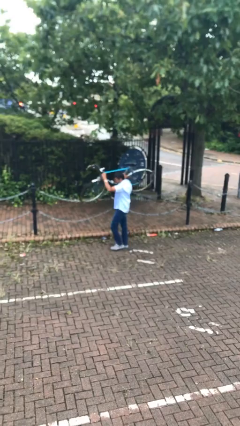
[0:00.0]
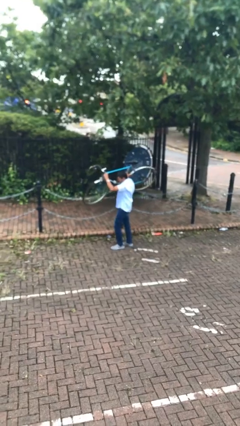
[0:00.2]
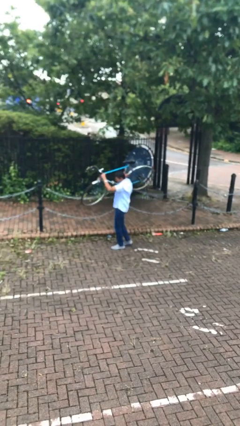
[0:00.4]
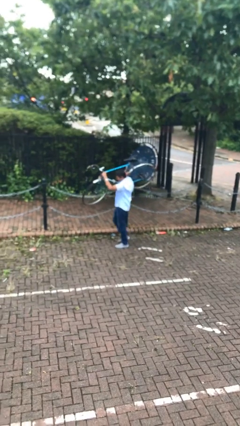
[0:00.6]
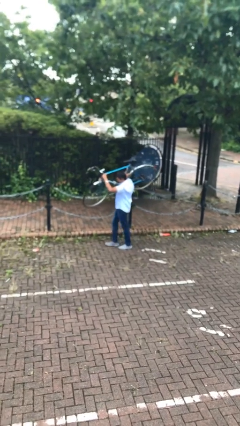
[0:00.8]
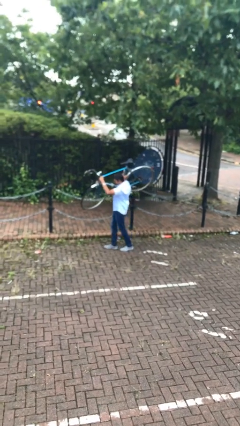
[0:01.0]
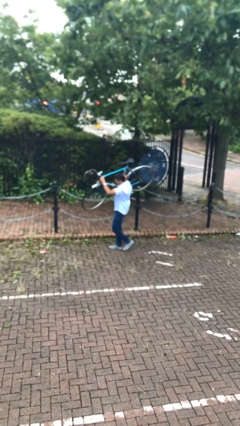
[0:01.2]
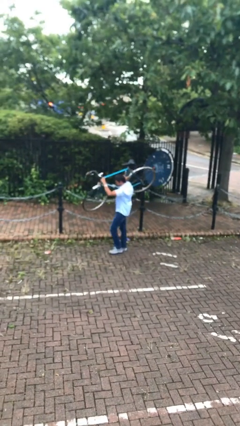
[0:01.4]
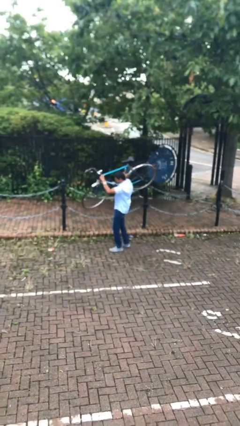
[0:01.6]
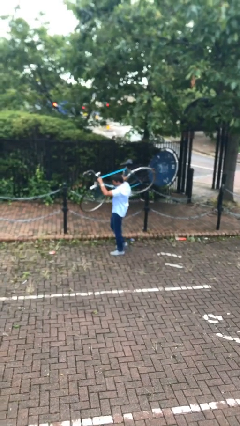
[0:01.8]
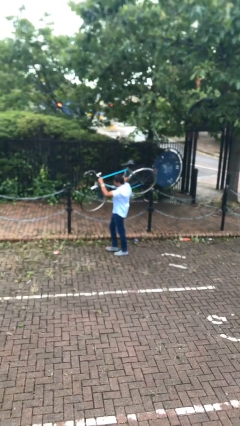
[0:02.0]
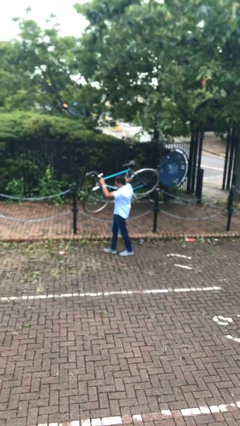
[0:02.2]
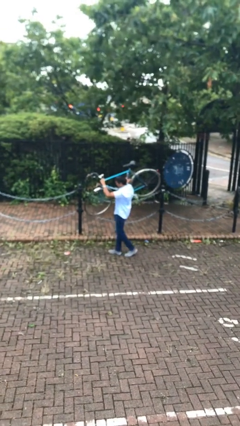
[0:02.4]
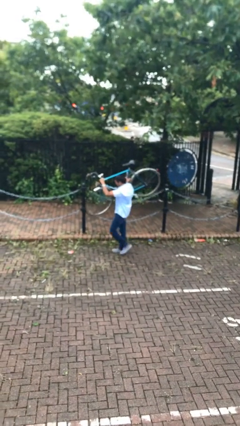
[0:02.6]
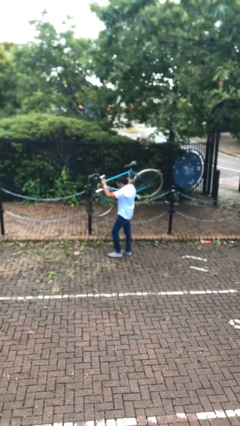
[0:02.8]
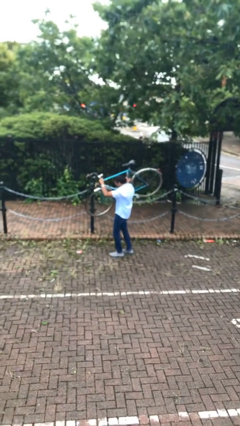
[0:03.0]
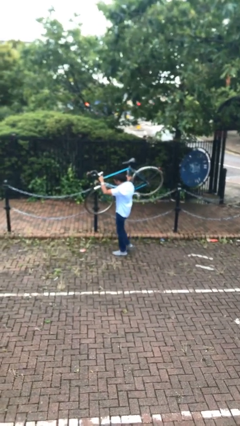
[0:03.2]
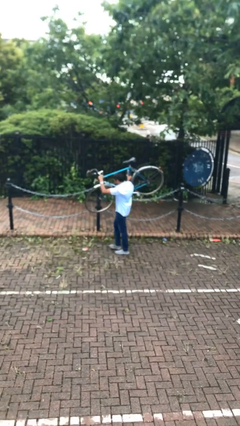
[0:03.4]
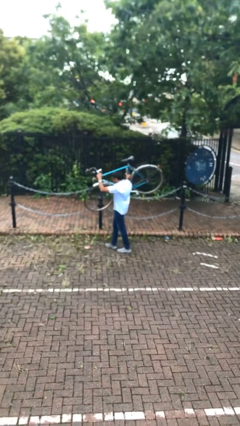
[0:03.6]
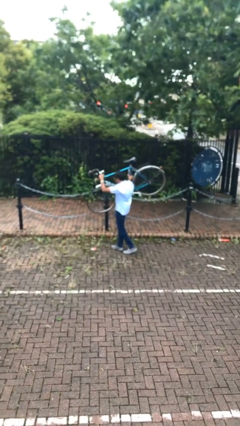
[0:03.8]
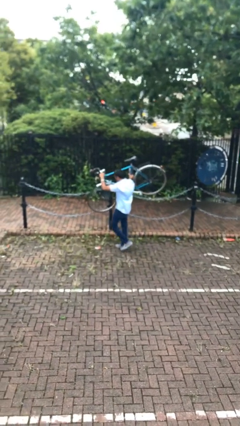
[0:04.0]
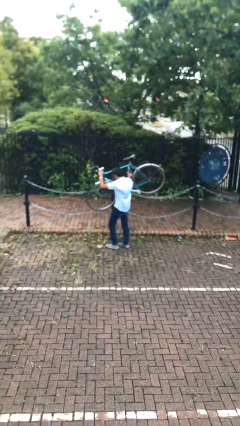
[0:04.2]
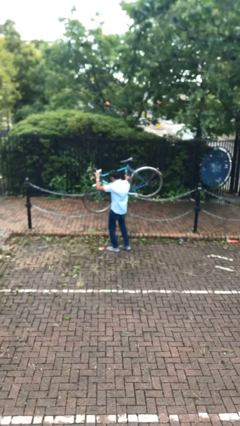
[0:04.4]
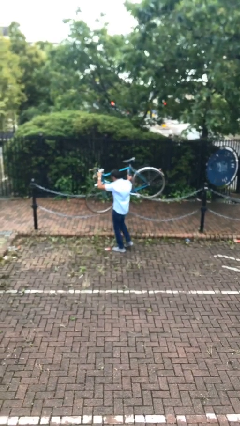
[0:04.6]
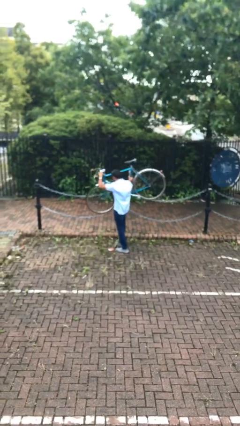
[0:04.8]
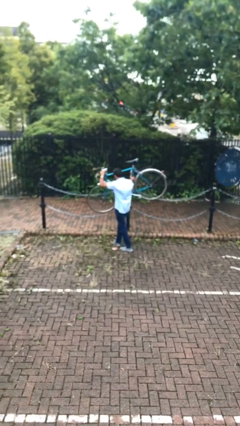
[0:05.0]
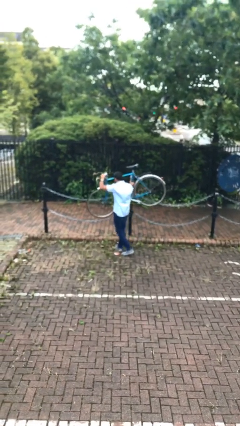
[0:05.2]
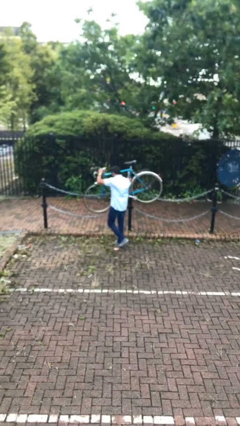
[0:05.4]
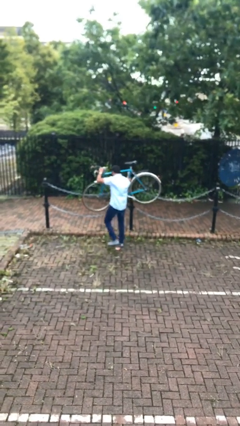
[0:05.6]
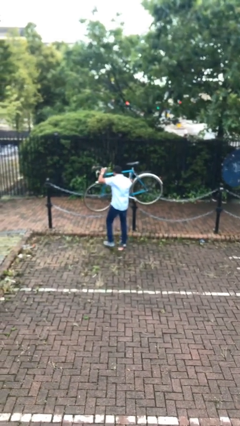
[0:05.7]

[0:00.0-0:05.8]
person carries heavy object

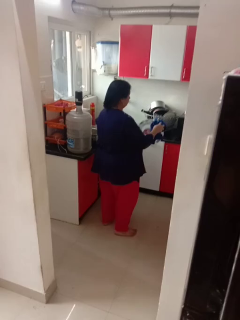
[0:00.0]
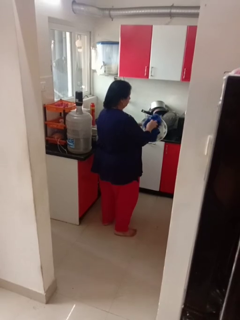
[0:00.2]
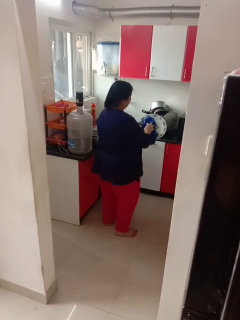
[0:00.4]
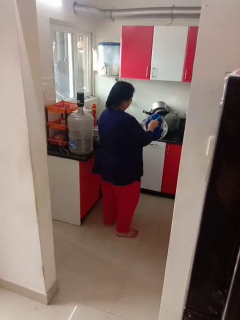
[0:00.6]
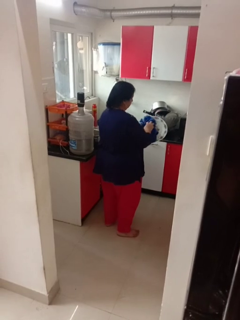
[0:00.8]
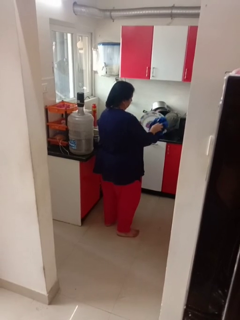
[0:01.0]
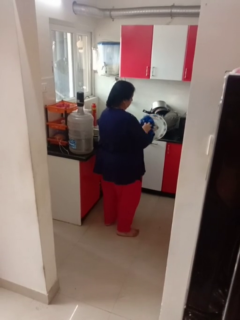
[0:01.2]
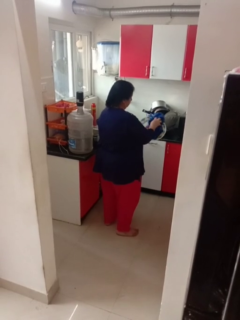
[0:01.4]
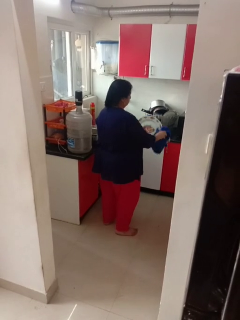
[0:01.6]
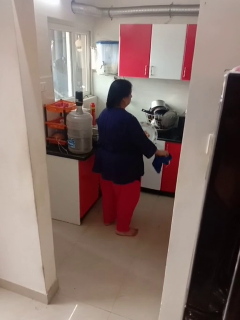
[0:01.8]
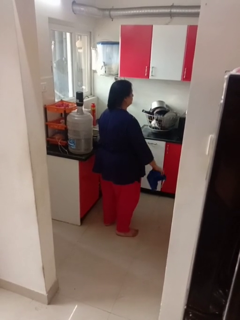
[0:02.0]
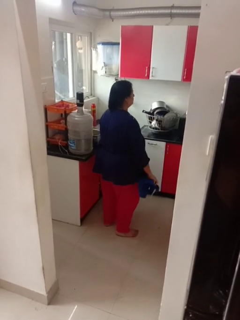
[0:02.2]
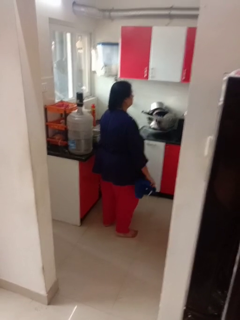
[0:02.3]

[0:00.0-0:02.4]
person dries dish

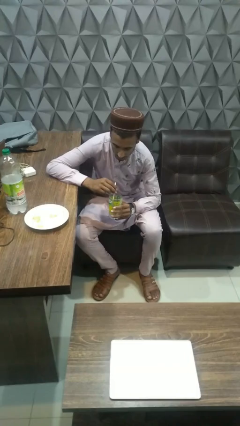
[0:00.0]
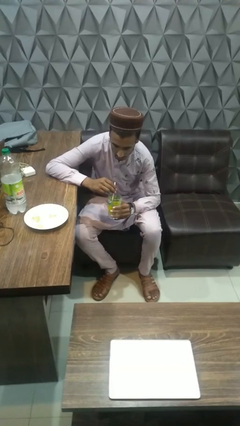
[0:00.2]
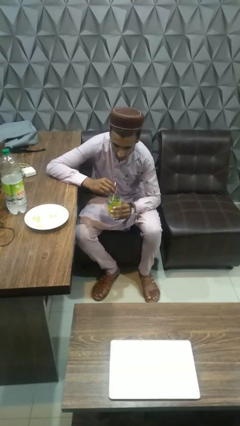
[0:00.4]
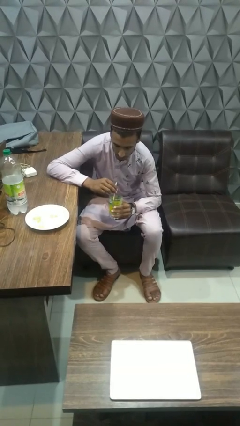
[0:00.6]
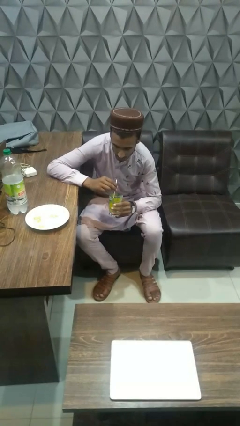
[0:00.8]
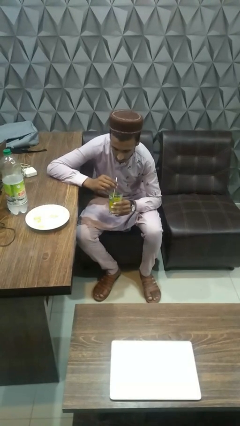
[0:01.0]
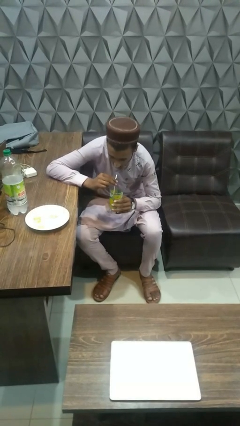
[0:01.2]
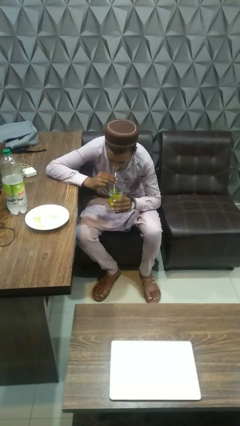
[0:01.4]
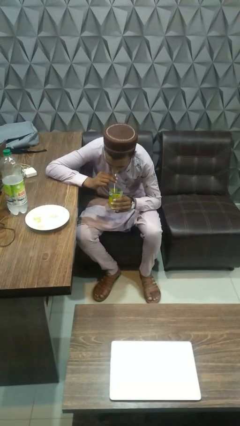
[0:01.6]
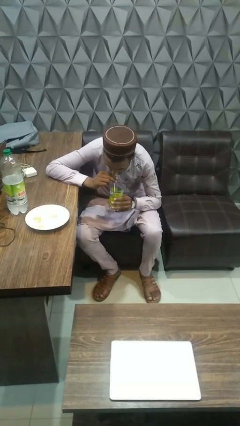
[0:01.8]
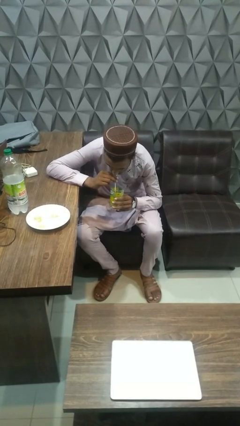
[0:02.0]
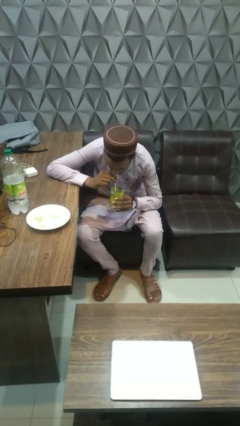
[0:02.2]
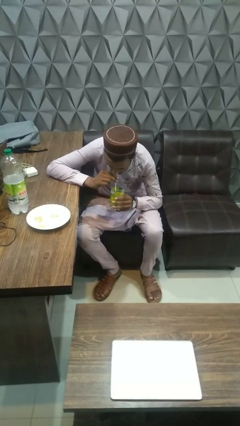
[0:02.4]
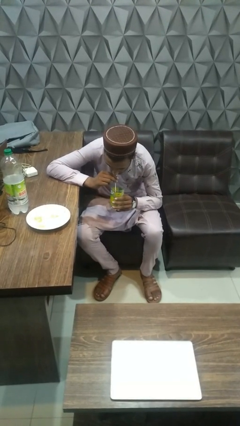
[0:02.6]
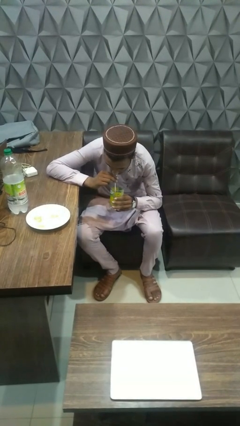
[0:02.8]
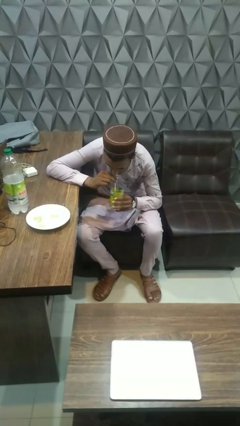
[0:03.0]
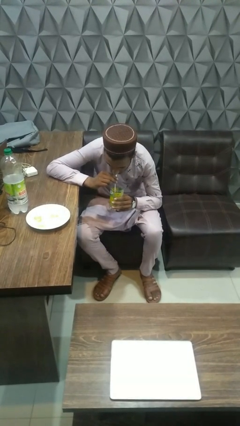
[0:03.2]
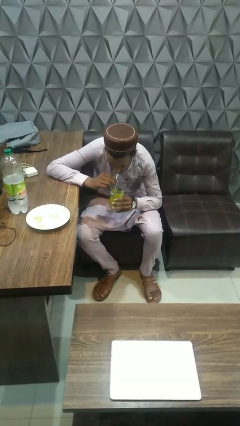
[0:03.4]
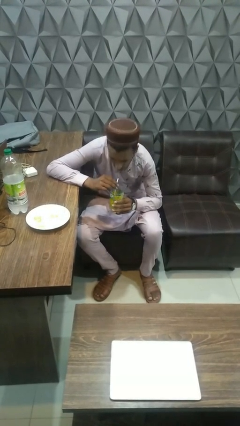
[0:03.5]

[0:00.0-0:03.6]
person drinks from straw

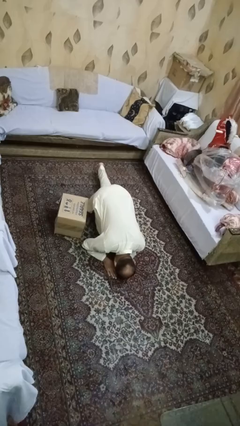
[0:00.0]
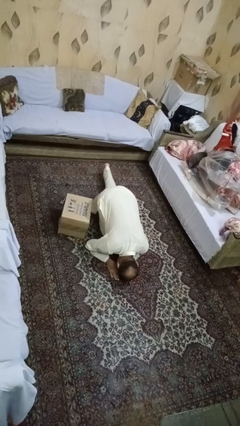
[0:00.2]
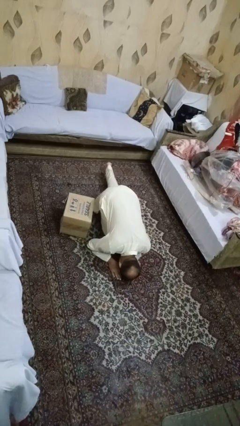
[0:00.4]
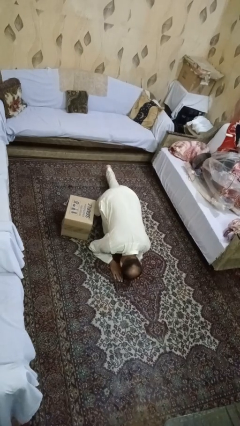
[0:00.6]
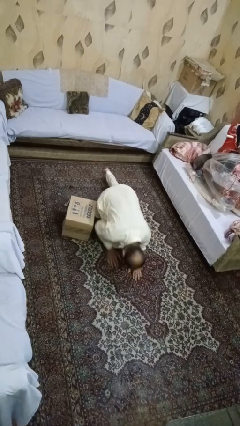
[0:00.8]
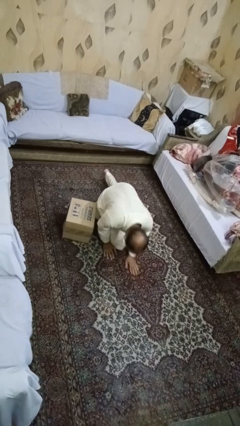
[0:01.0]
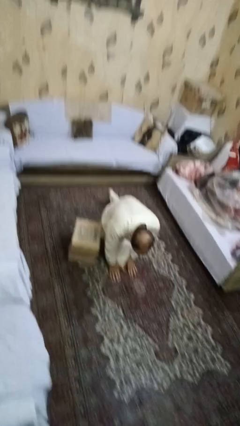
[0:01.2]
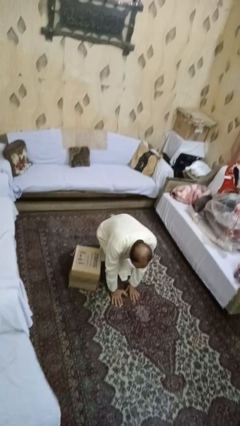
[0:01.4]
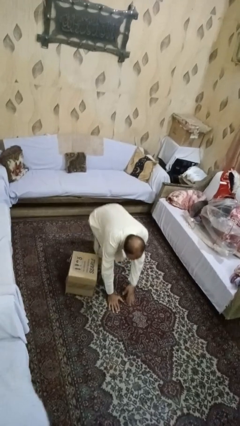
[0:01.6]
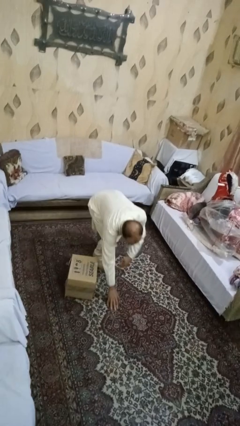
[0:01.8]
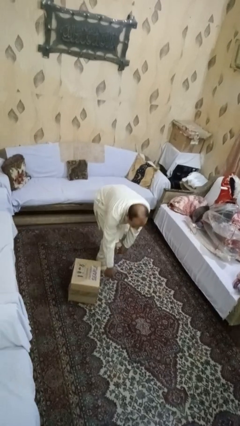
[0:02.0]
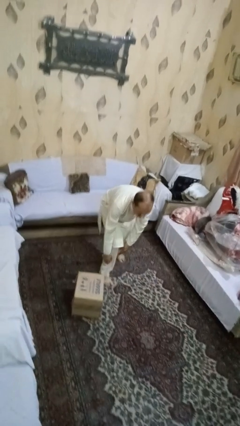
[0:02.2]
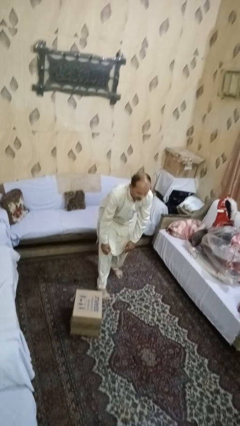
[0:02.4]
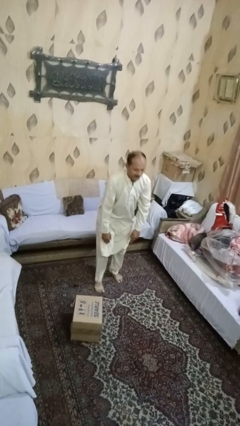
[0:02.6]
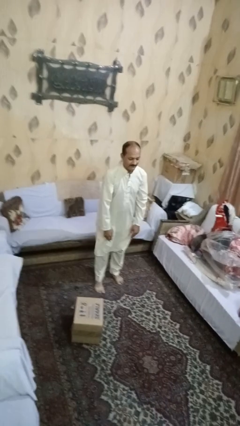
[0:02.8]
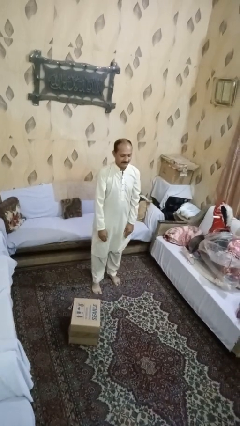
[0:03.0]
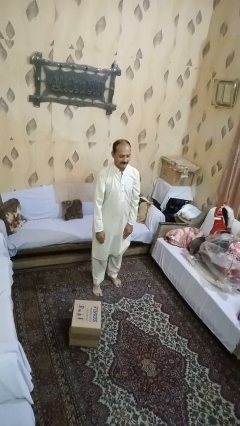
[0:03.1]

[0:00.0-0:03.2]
person stands up from floor

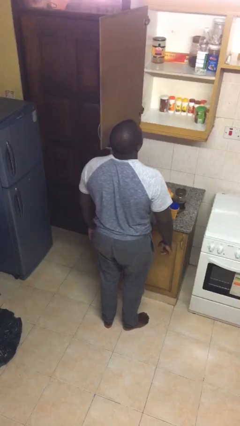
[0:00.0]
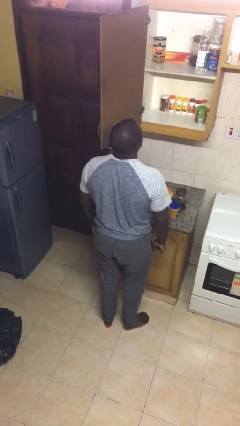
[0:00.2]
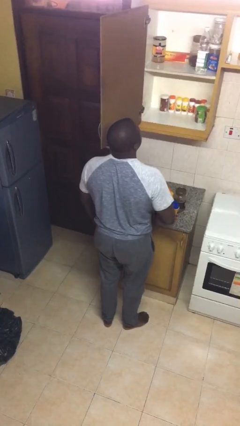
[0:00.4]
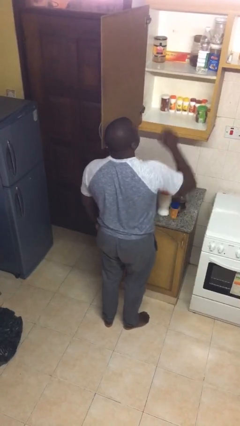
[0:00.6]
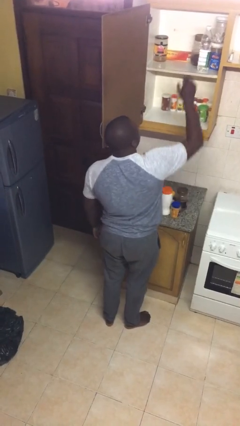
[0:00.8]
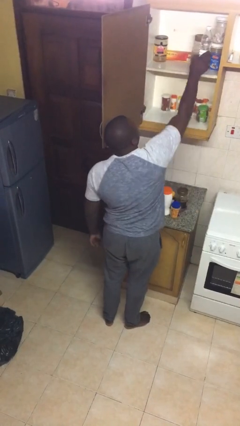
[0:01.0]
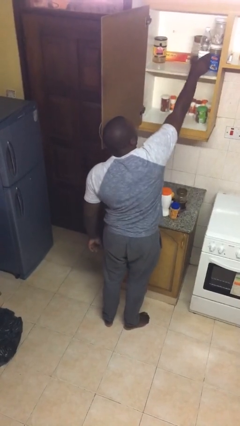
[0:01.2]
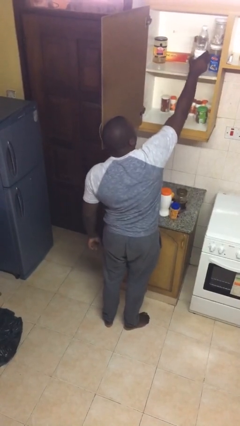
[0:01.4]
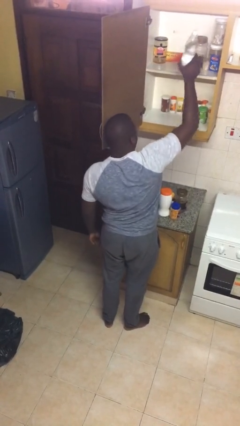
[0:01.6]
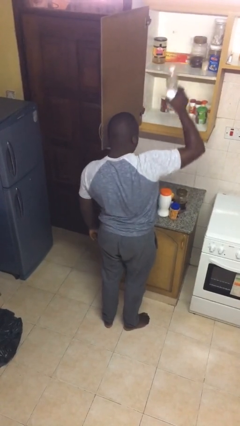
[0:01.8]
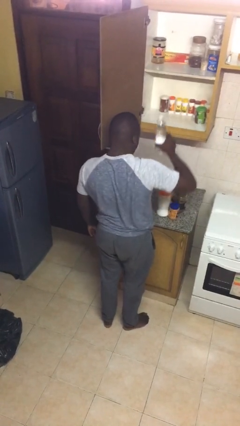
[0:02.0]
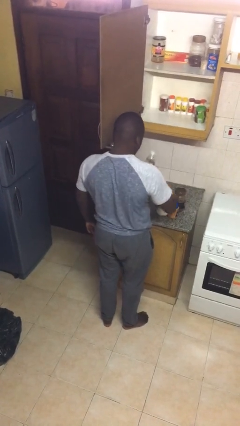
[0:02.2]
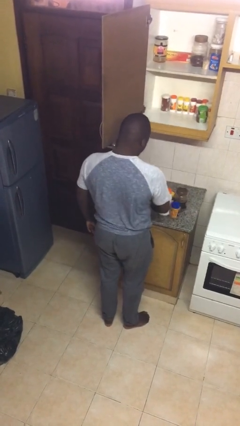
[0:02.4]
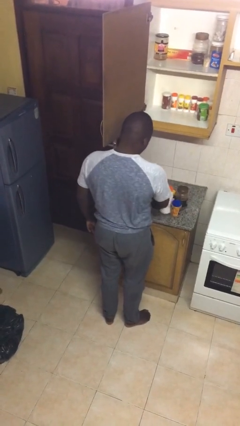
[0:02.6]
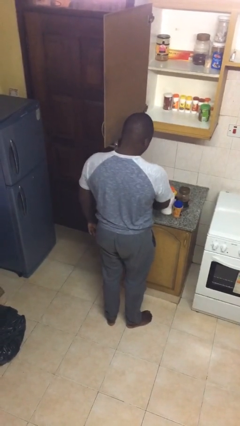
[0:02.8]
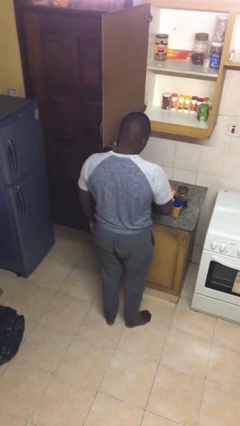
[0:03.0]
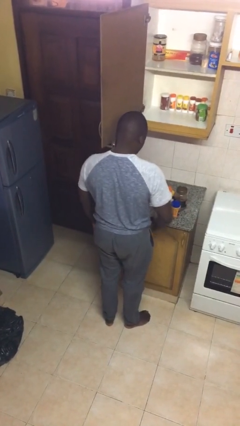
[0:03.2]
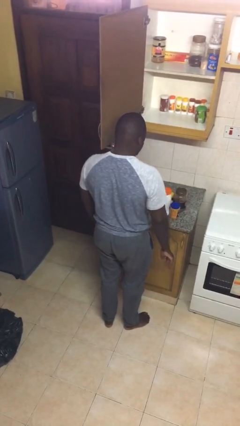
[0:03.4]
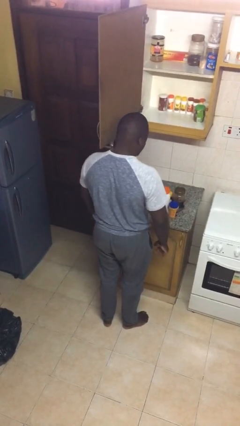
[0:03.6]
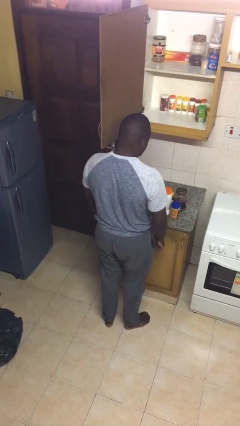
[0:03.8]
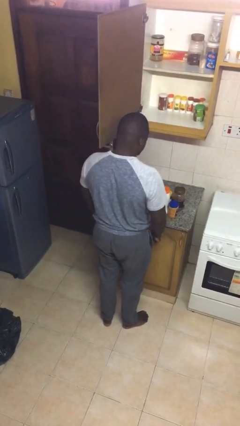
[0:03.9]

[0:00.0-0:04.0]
person takes object from cabinet
